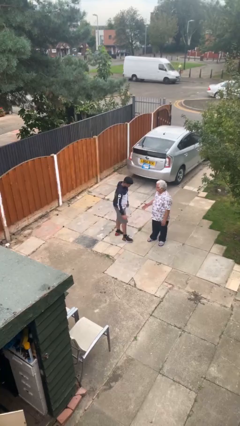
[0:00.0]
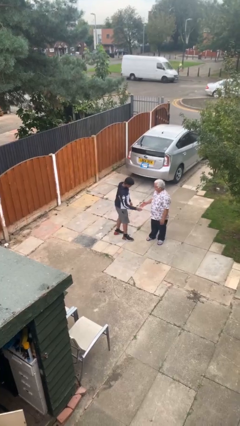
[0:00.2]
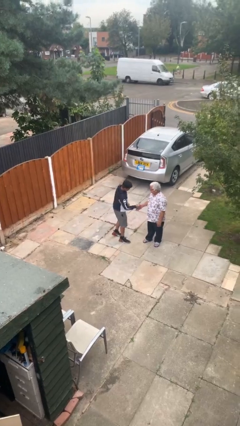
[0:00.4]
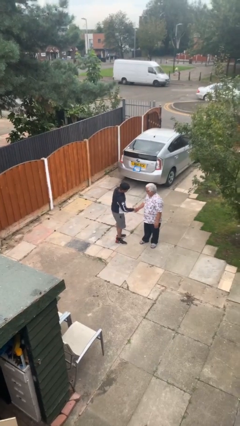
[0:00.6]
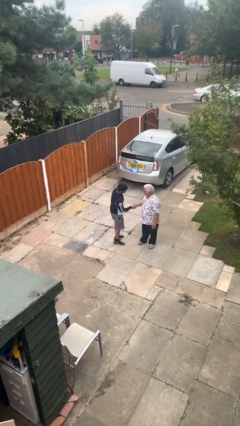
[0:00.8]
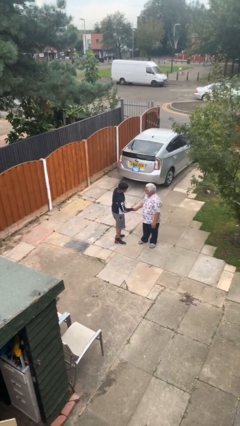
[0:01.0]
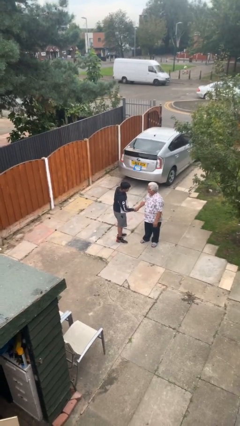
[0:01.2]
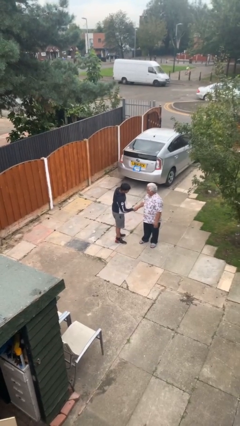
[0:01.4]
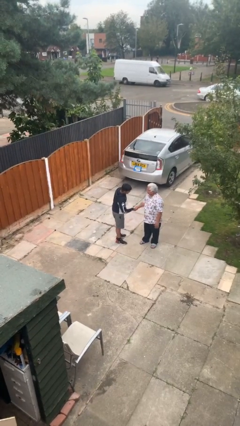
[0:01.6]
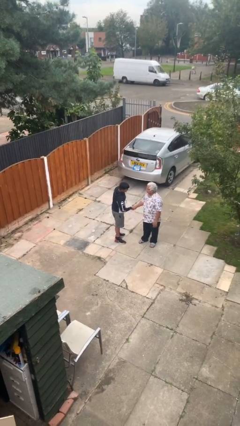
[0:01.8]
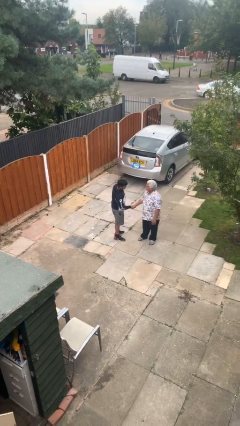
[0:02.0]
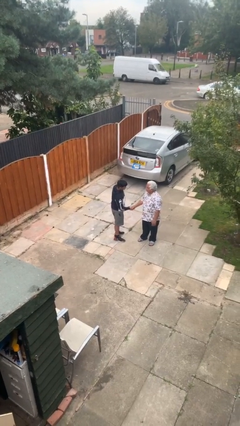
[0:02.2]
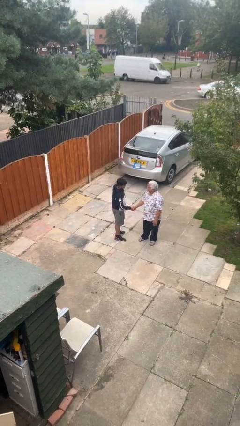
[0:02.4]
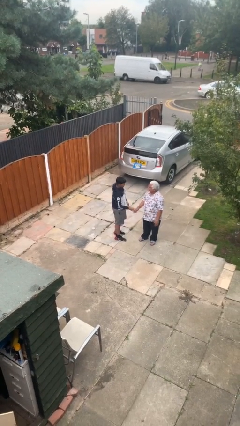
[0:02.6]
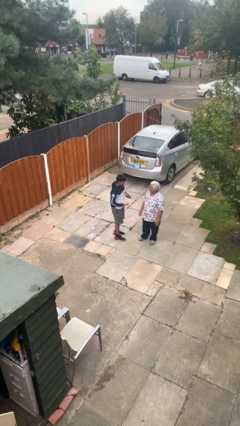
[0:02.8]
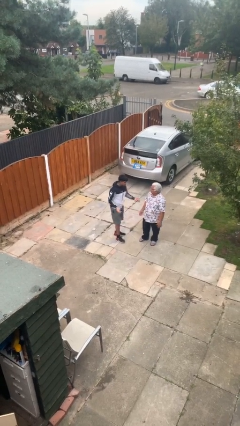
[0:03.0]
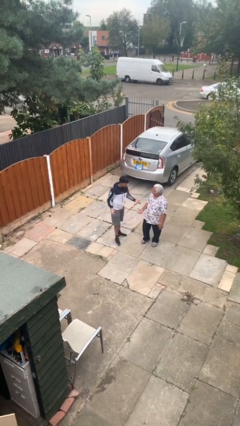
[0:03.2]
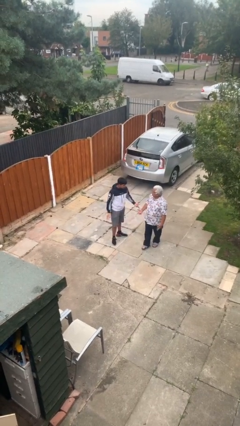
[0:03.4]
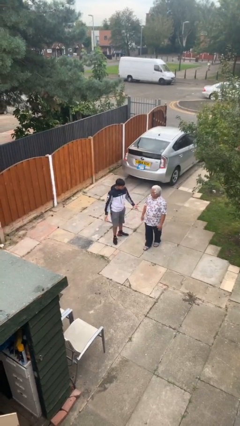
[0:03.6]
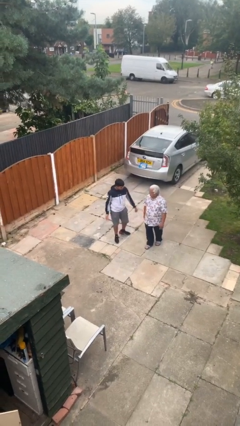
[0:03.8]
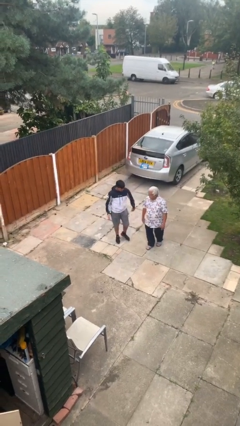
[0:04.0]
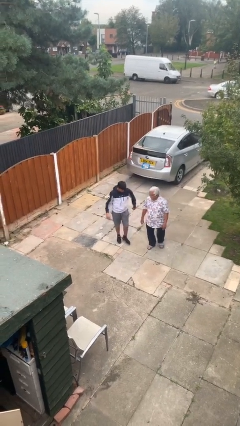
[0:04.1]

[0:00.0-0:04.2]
person shakes hand

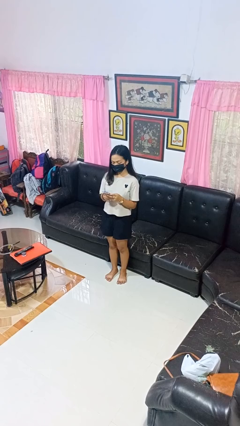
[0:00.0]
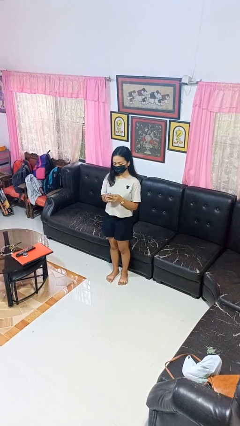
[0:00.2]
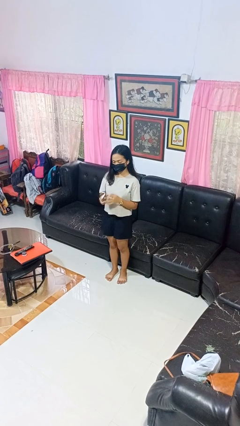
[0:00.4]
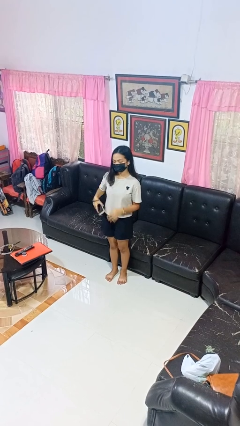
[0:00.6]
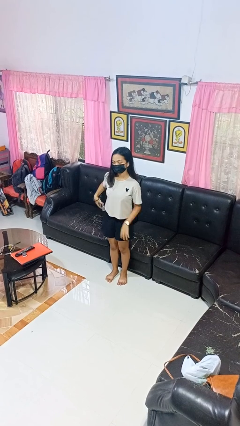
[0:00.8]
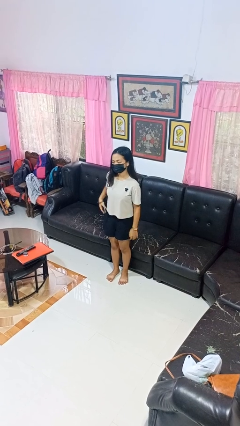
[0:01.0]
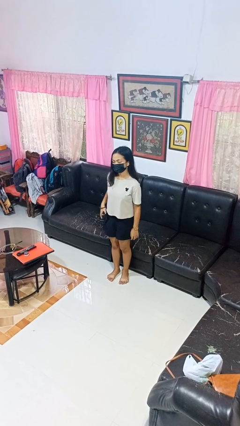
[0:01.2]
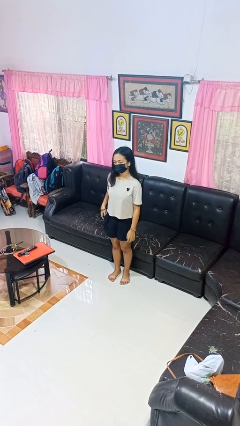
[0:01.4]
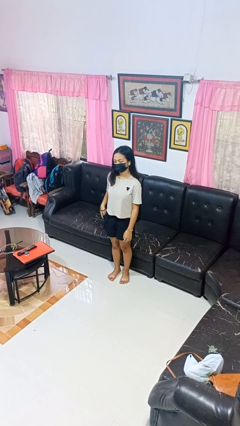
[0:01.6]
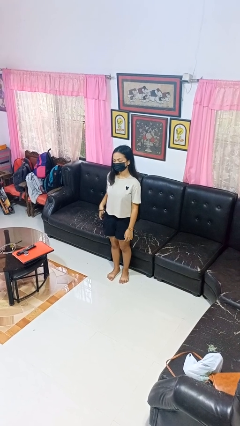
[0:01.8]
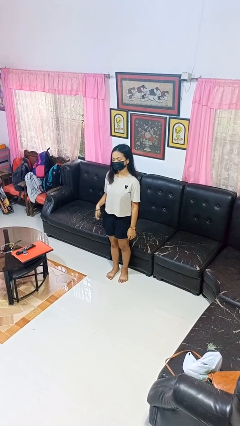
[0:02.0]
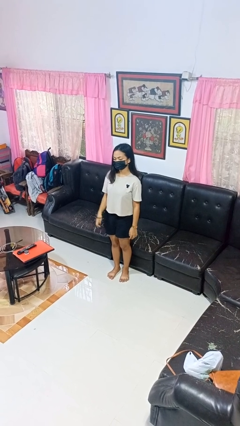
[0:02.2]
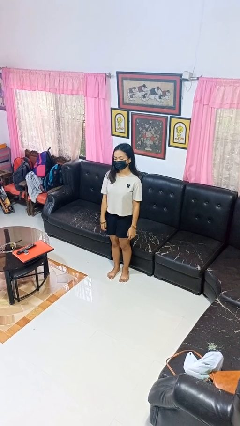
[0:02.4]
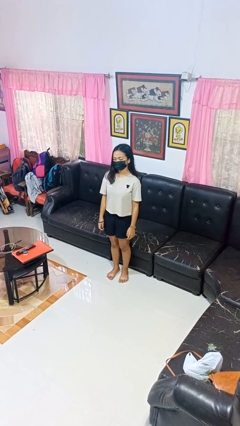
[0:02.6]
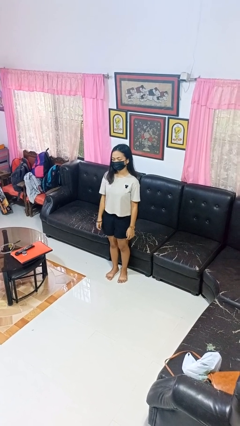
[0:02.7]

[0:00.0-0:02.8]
person puts phone into pocket

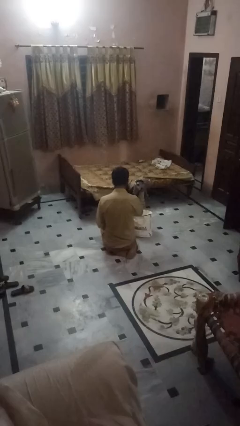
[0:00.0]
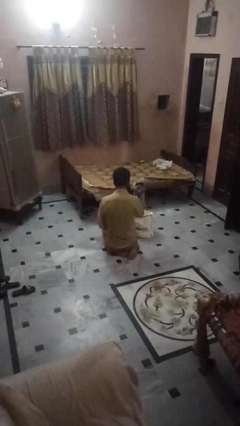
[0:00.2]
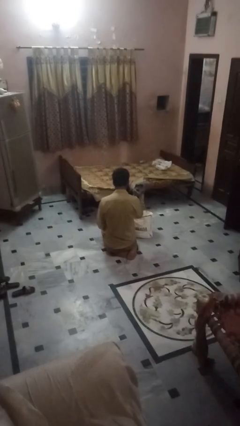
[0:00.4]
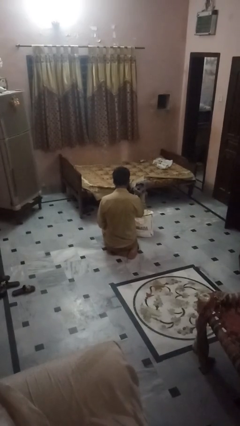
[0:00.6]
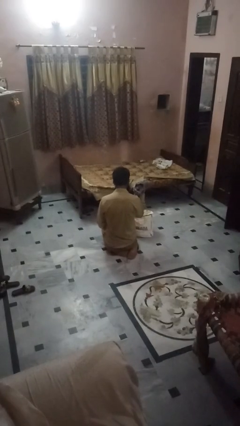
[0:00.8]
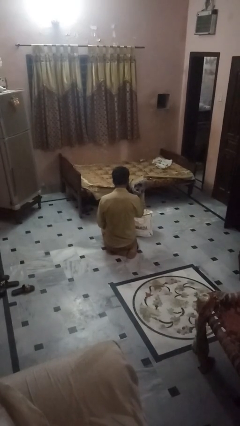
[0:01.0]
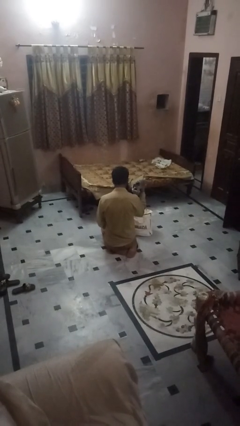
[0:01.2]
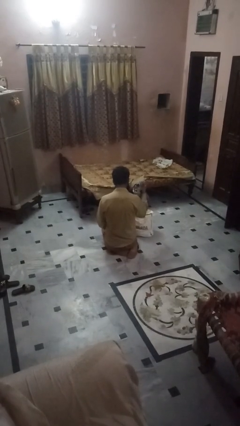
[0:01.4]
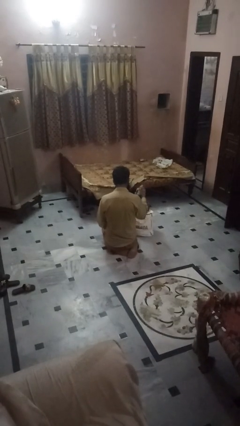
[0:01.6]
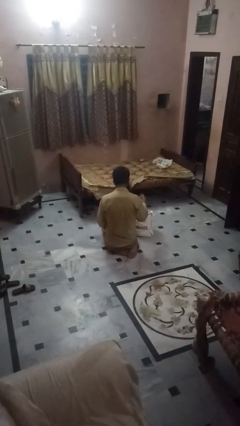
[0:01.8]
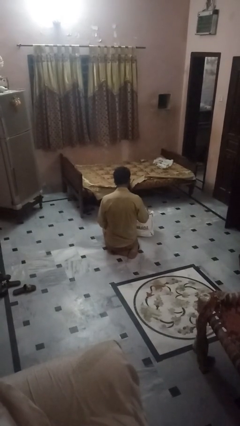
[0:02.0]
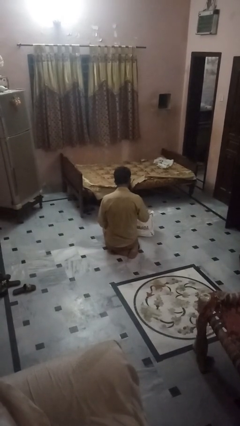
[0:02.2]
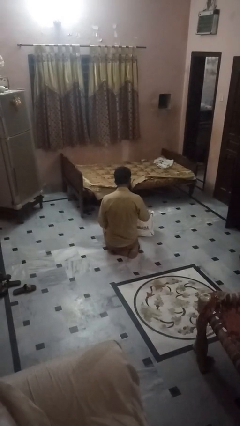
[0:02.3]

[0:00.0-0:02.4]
person puts object into bag

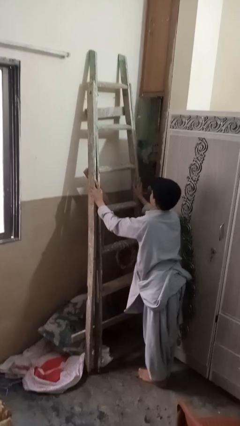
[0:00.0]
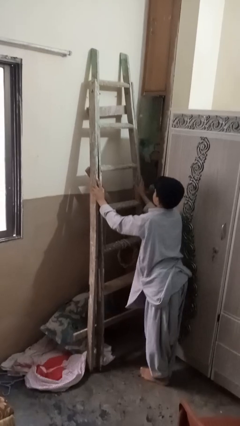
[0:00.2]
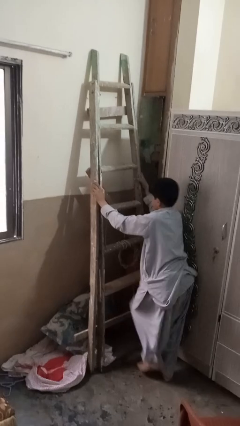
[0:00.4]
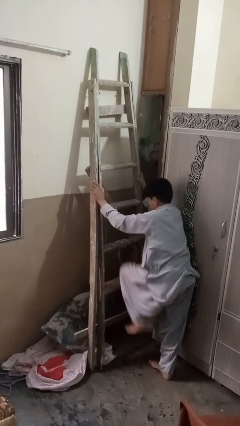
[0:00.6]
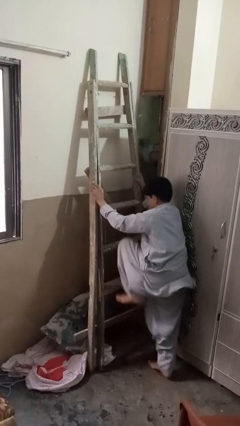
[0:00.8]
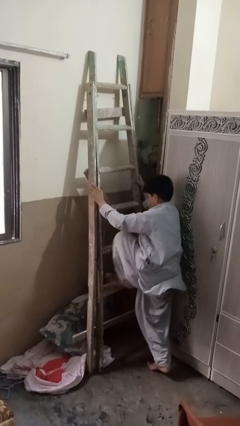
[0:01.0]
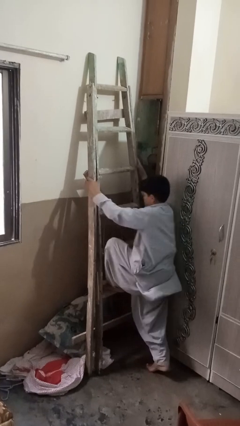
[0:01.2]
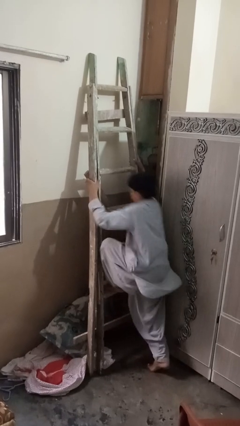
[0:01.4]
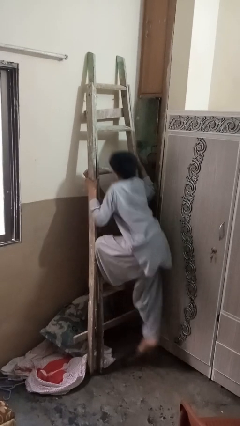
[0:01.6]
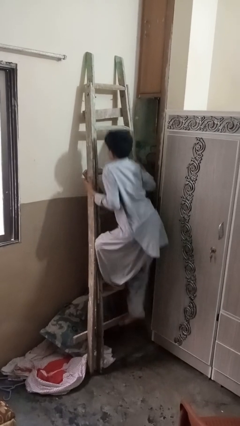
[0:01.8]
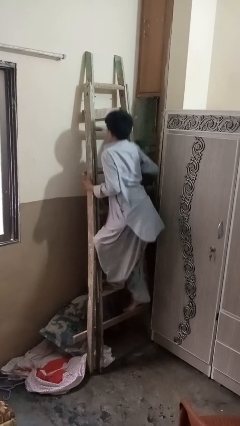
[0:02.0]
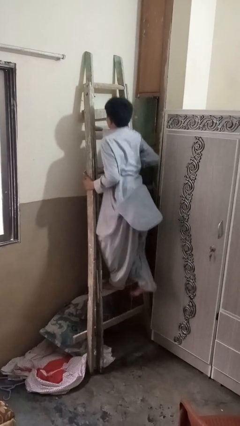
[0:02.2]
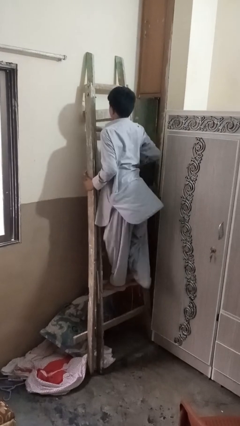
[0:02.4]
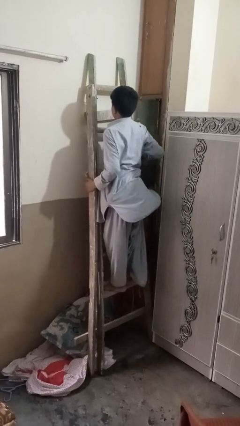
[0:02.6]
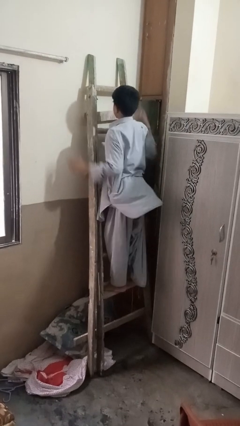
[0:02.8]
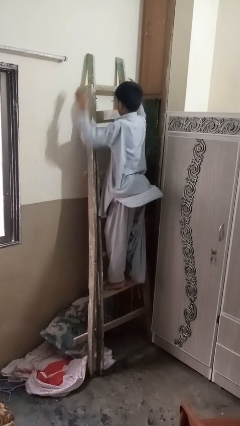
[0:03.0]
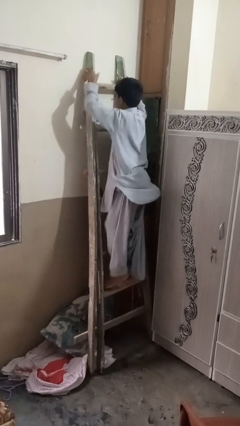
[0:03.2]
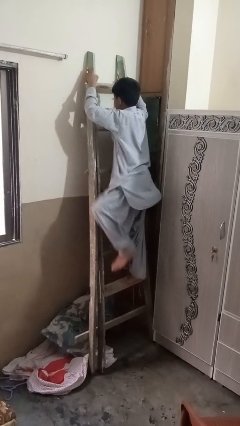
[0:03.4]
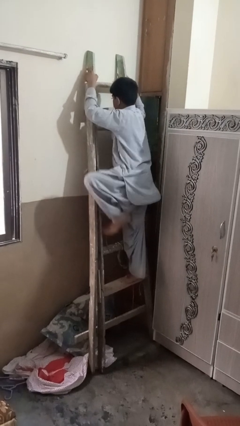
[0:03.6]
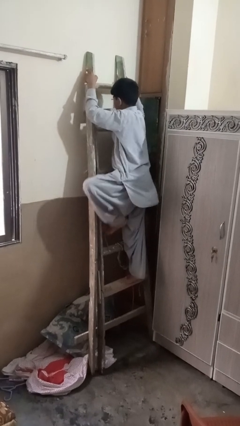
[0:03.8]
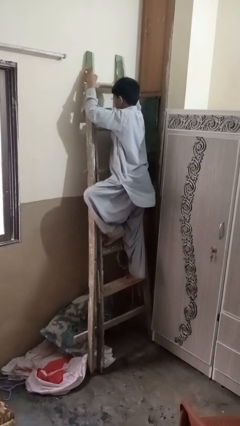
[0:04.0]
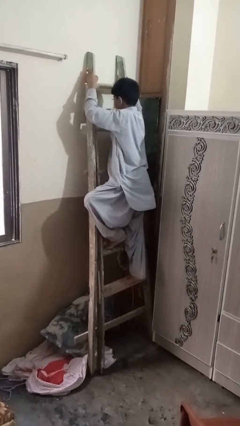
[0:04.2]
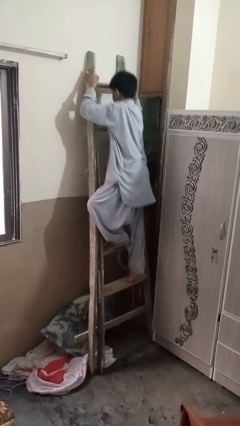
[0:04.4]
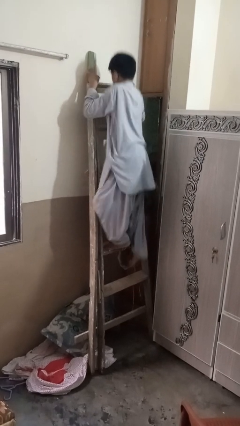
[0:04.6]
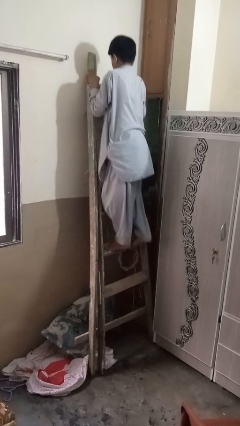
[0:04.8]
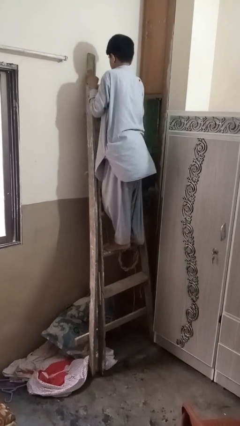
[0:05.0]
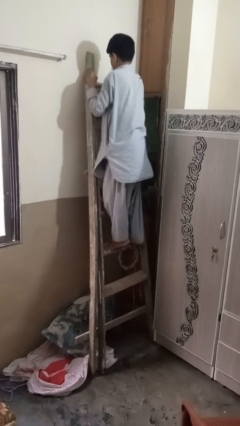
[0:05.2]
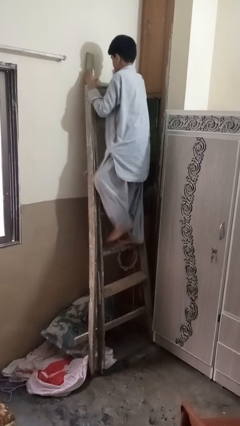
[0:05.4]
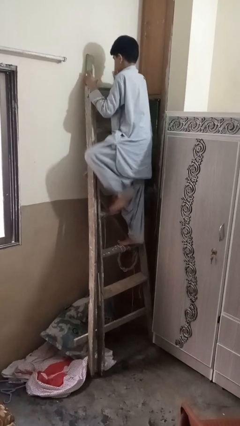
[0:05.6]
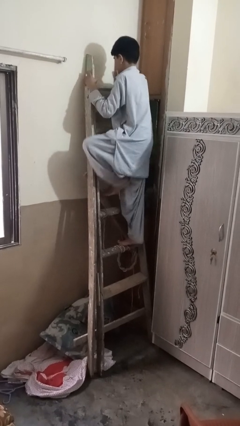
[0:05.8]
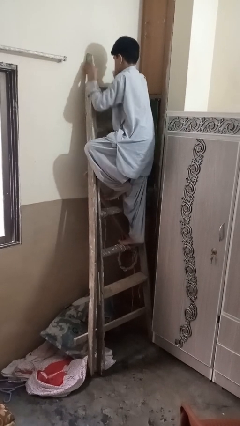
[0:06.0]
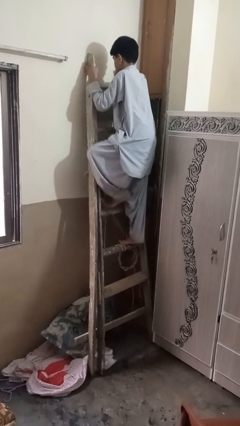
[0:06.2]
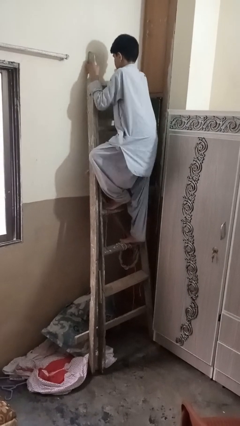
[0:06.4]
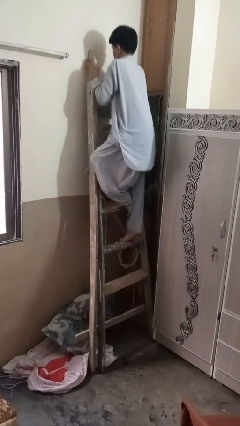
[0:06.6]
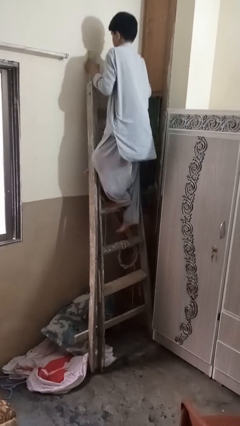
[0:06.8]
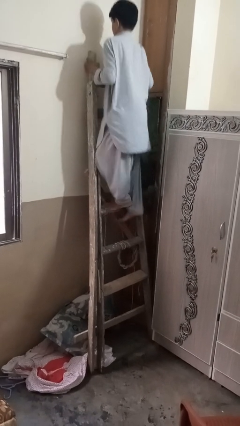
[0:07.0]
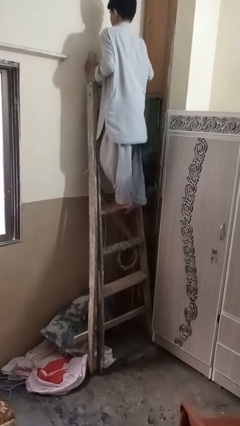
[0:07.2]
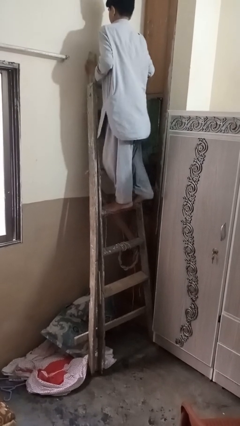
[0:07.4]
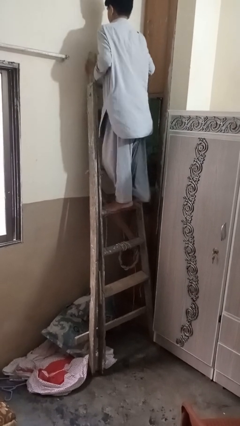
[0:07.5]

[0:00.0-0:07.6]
person climbs up ladder

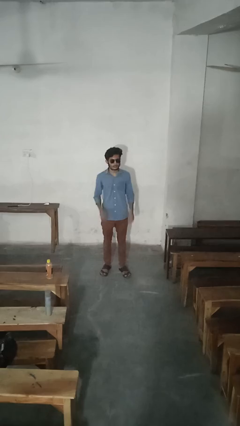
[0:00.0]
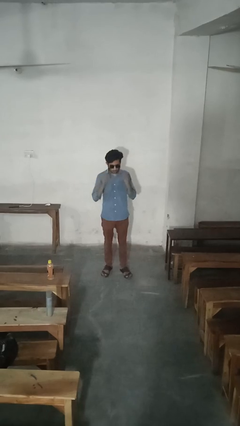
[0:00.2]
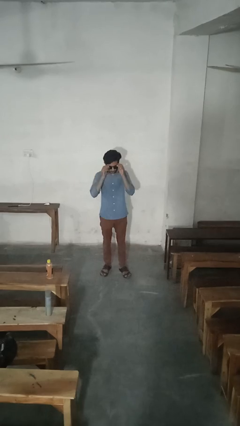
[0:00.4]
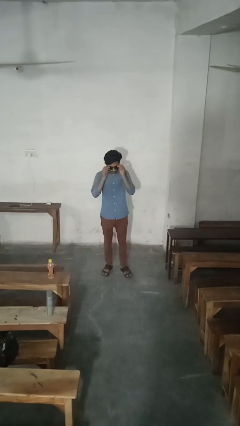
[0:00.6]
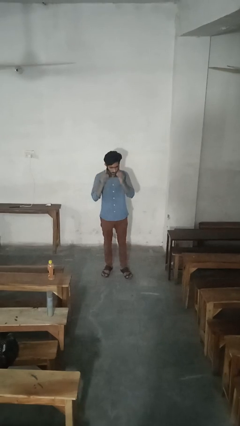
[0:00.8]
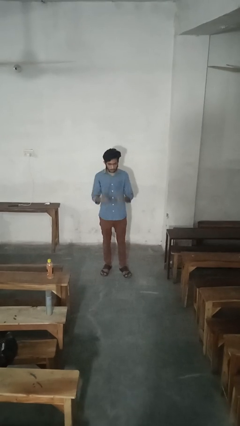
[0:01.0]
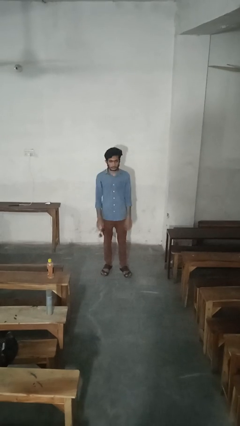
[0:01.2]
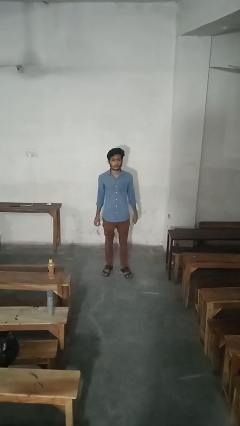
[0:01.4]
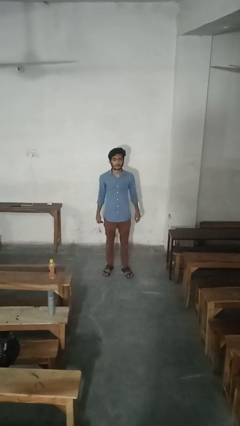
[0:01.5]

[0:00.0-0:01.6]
person takes off sunglasses
